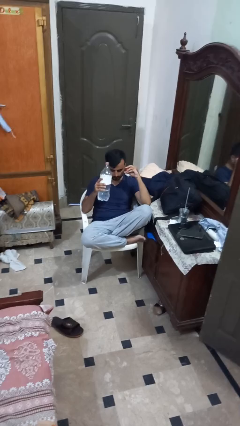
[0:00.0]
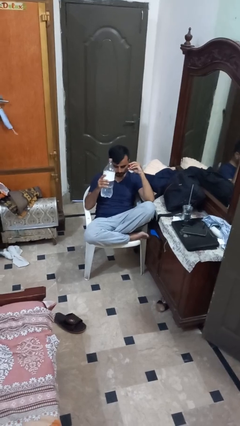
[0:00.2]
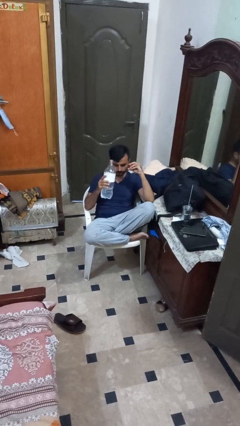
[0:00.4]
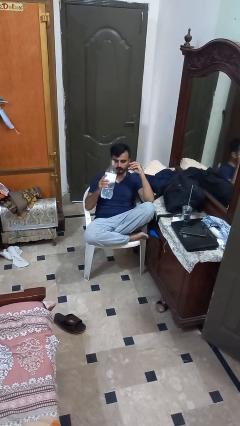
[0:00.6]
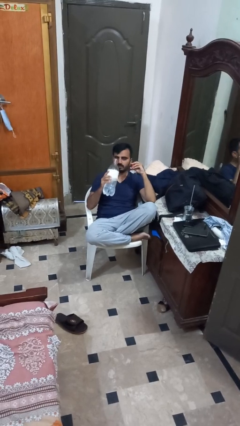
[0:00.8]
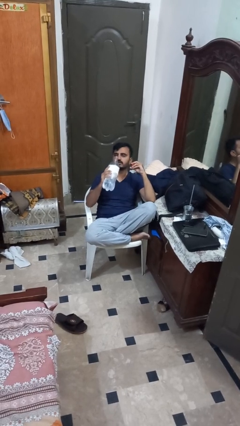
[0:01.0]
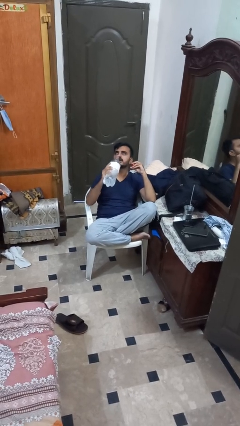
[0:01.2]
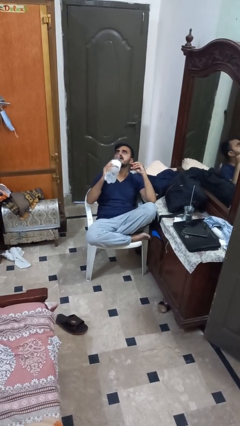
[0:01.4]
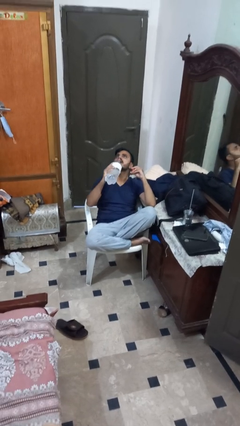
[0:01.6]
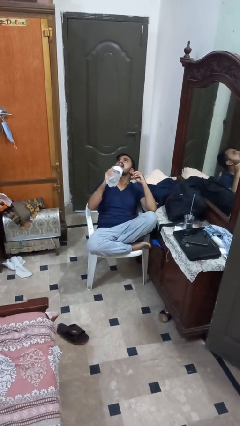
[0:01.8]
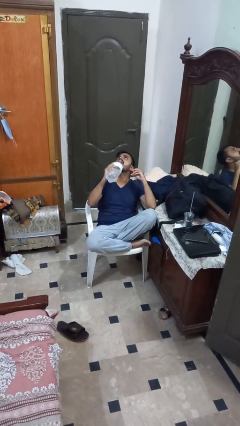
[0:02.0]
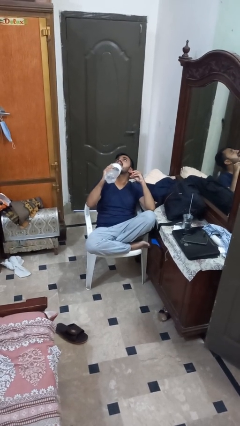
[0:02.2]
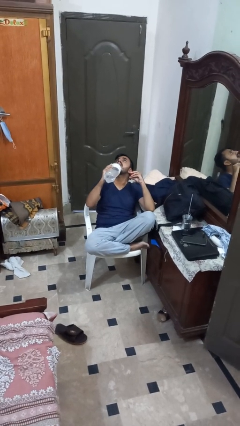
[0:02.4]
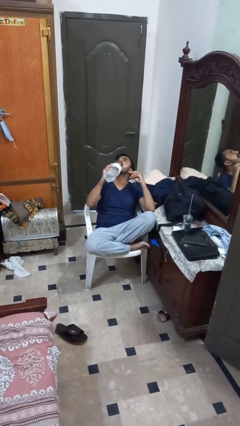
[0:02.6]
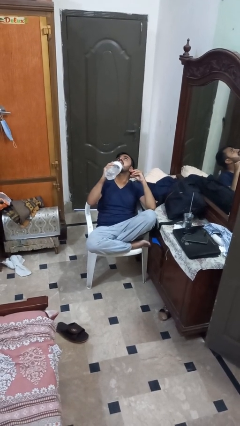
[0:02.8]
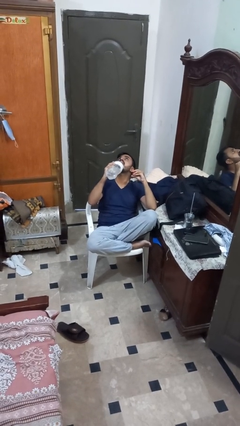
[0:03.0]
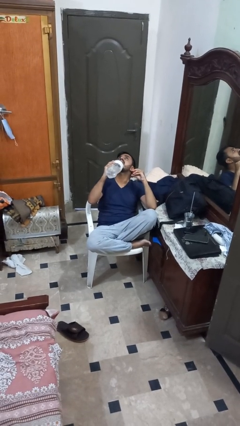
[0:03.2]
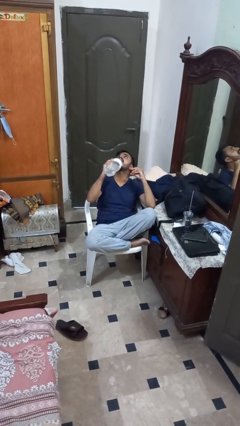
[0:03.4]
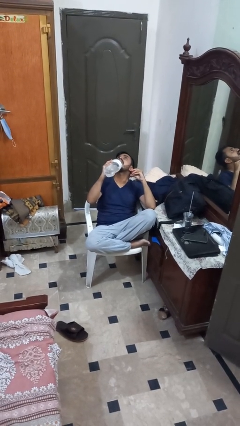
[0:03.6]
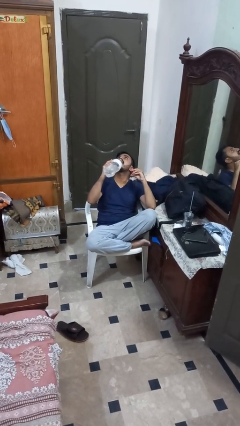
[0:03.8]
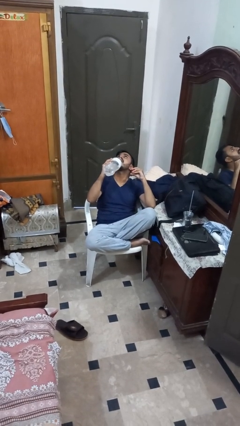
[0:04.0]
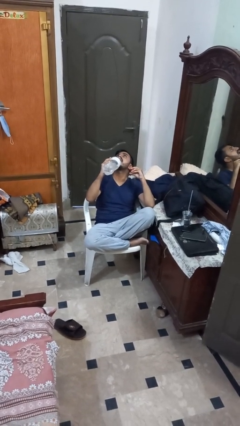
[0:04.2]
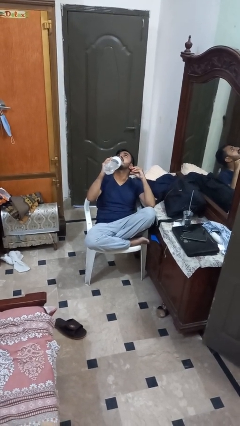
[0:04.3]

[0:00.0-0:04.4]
person drinks from bottle

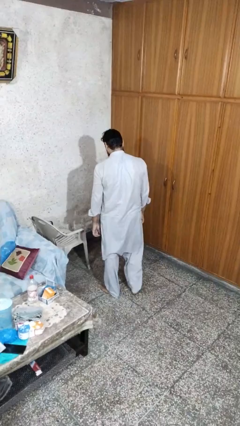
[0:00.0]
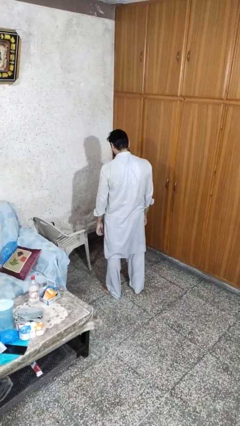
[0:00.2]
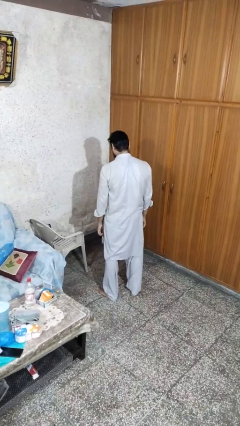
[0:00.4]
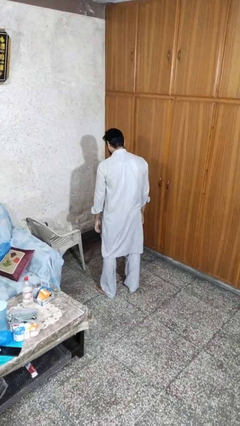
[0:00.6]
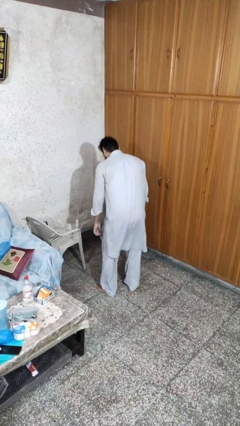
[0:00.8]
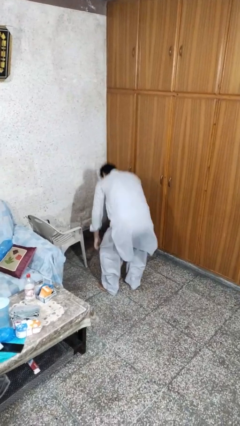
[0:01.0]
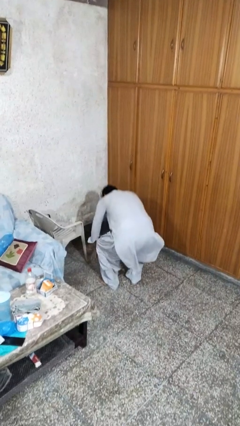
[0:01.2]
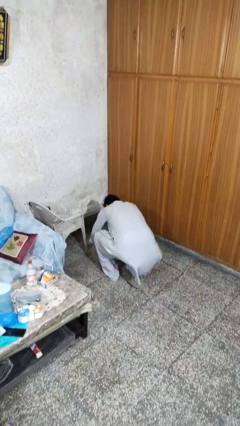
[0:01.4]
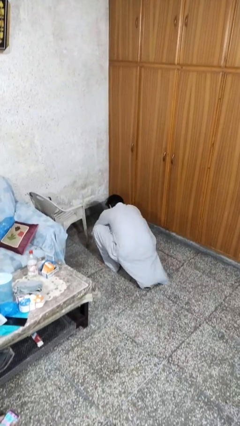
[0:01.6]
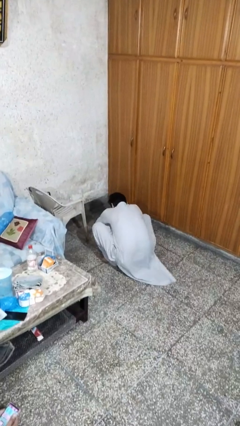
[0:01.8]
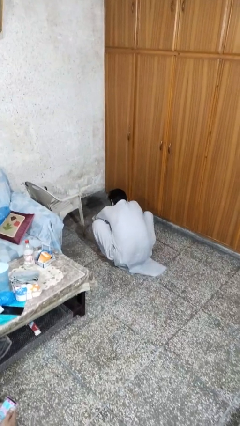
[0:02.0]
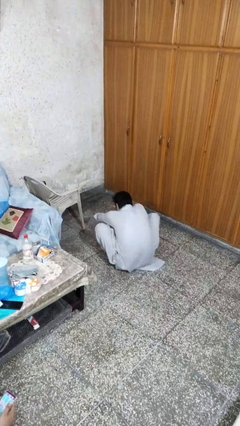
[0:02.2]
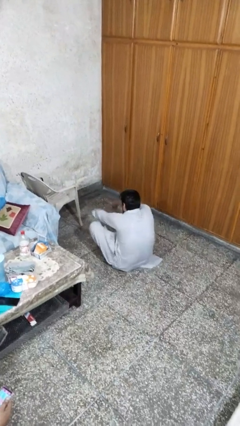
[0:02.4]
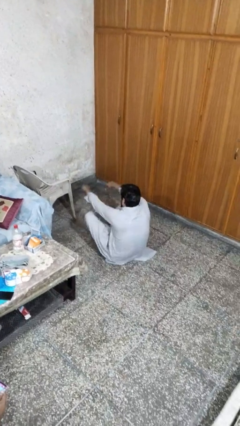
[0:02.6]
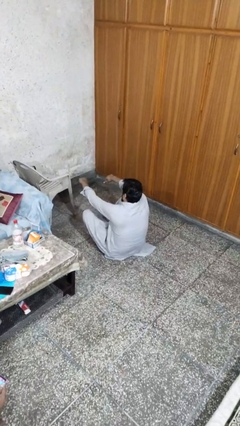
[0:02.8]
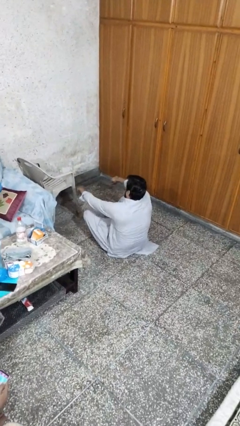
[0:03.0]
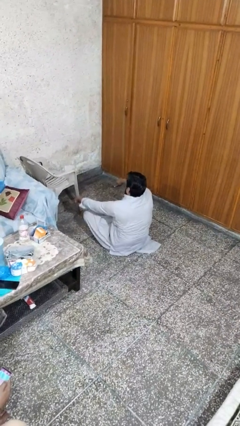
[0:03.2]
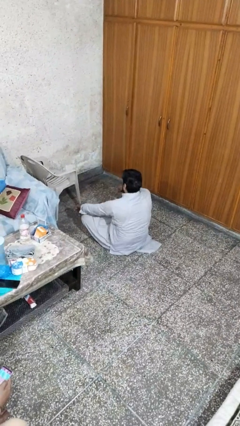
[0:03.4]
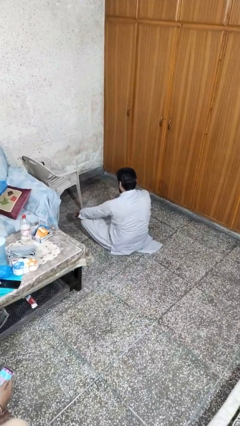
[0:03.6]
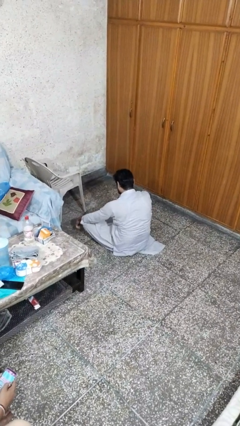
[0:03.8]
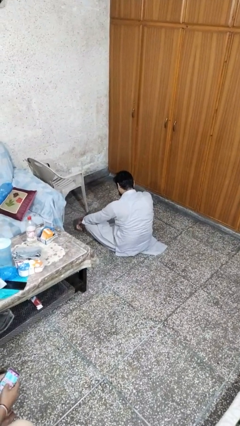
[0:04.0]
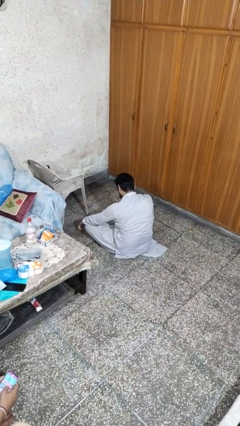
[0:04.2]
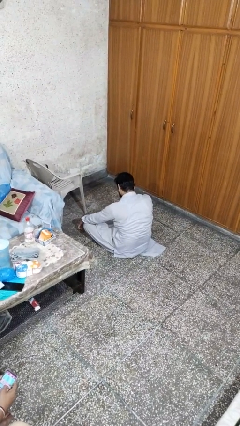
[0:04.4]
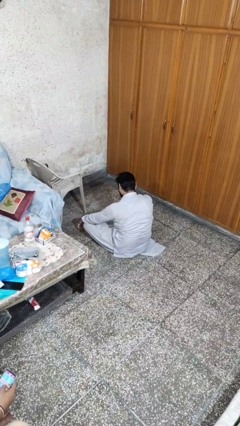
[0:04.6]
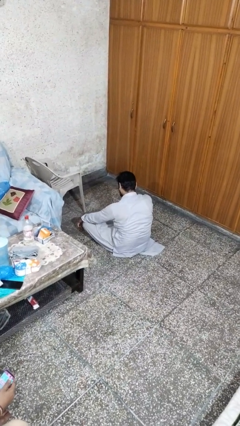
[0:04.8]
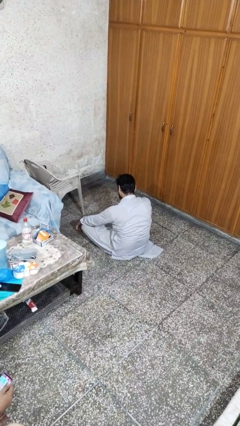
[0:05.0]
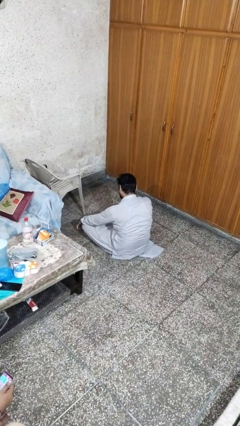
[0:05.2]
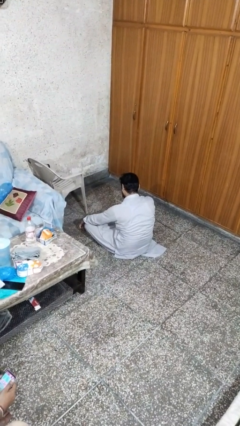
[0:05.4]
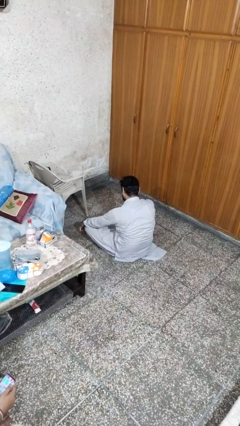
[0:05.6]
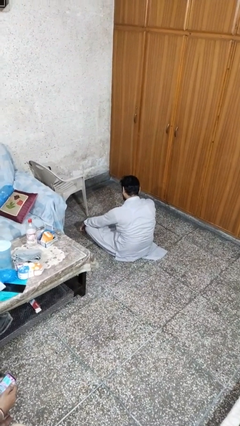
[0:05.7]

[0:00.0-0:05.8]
person sits crisscross

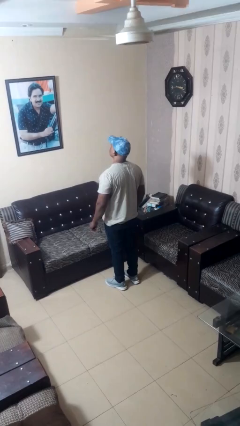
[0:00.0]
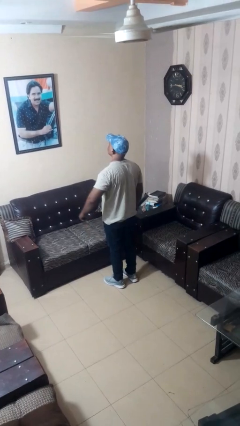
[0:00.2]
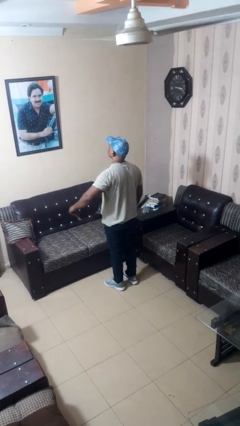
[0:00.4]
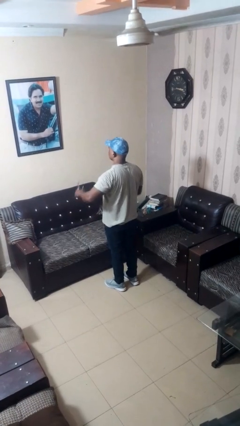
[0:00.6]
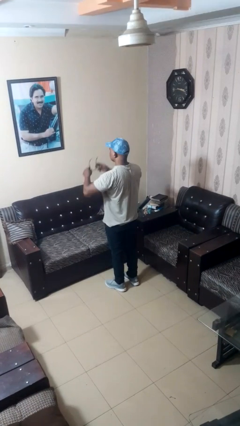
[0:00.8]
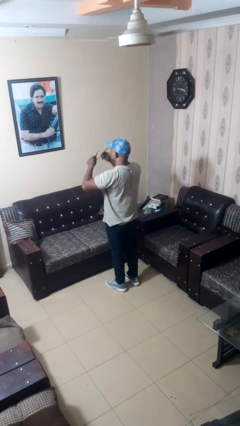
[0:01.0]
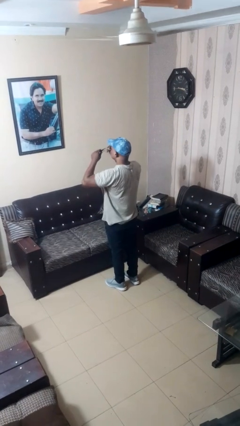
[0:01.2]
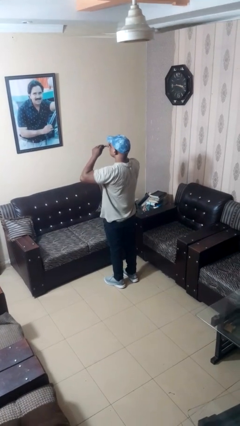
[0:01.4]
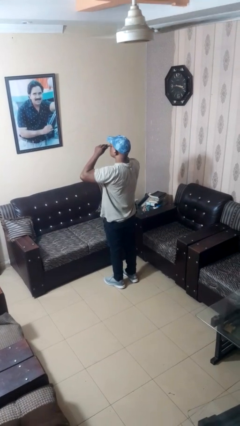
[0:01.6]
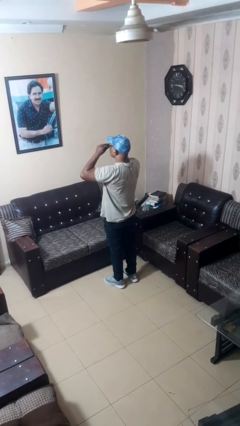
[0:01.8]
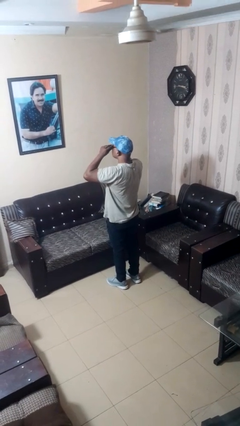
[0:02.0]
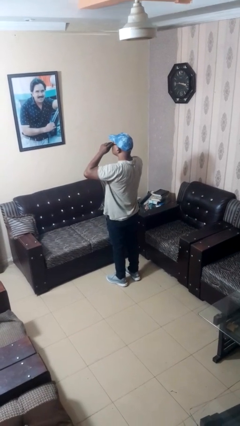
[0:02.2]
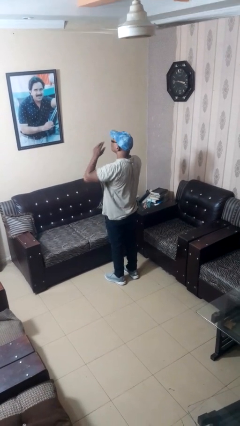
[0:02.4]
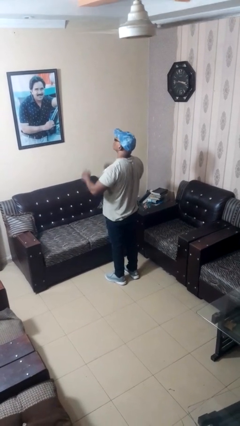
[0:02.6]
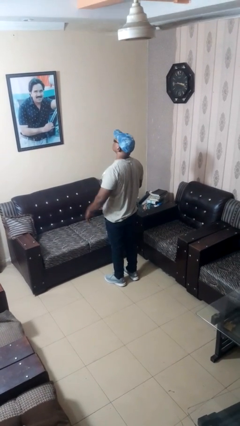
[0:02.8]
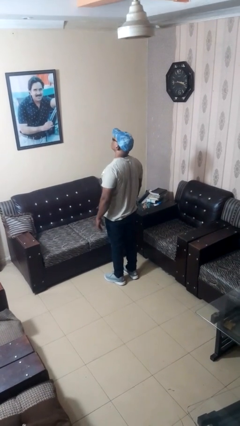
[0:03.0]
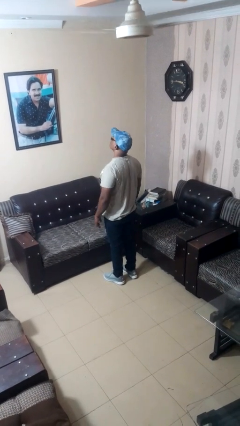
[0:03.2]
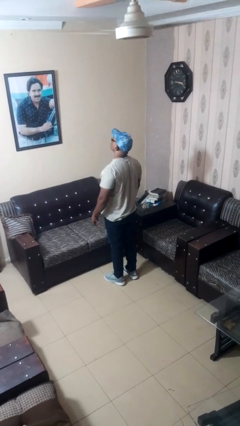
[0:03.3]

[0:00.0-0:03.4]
person puts on glasses

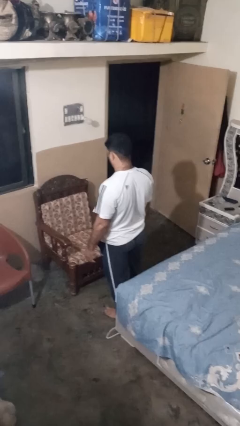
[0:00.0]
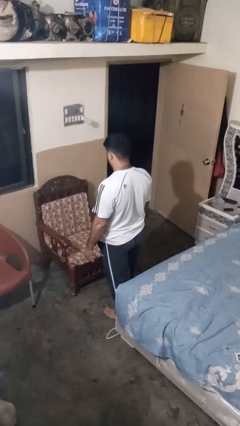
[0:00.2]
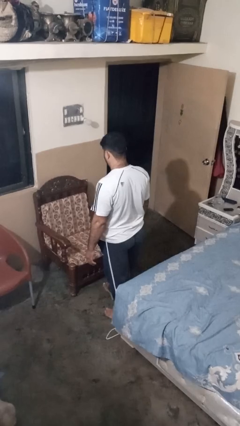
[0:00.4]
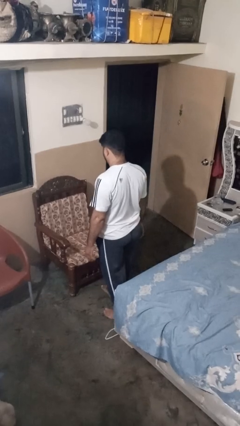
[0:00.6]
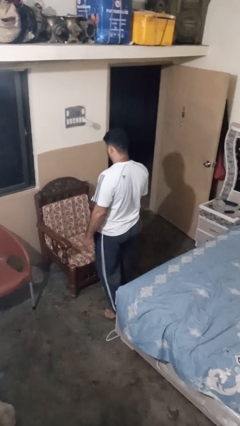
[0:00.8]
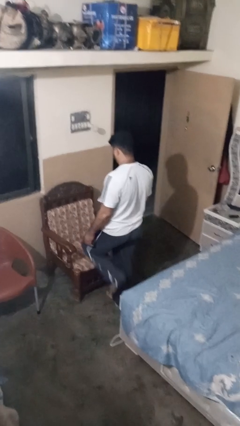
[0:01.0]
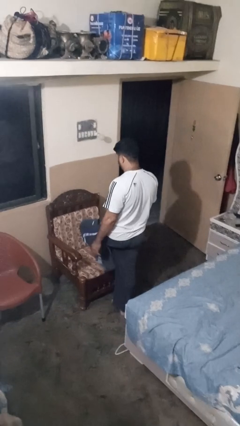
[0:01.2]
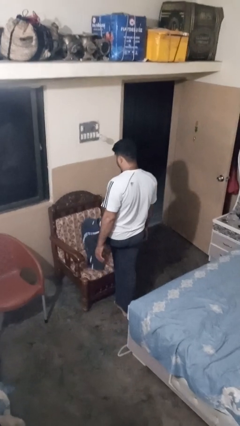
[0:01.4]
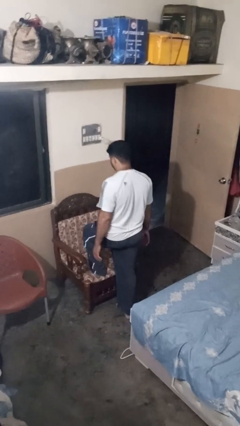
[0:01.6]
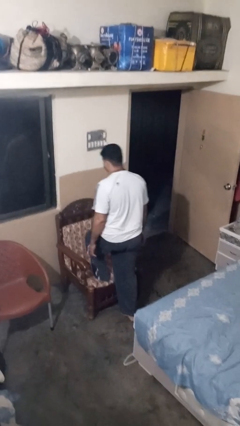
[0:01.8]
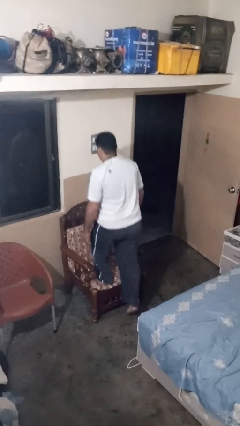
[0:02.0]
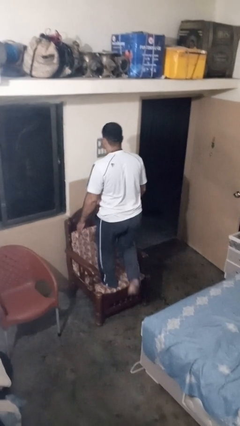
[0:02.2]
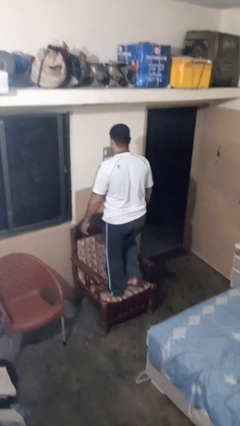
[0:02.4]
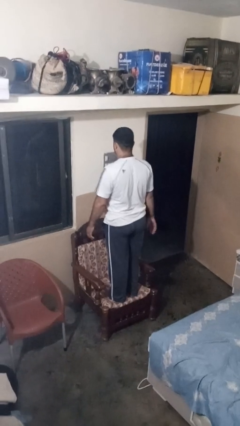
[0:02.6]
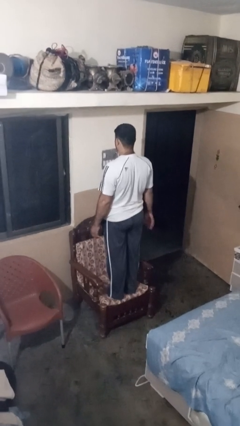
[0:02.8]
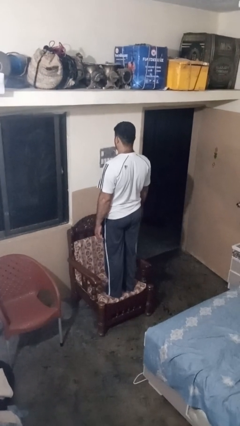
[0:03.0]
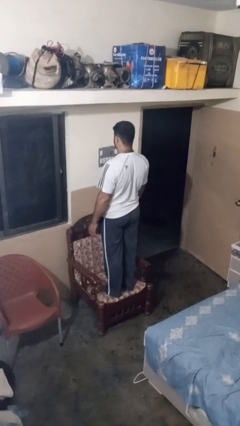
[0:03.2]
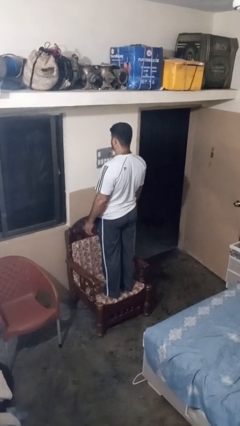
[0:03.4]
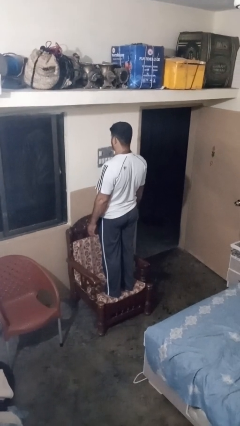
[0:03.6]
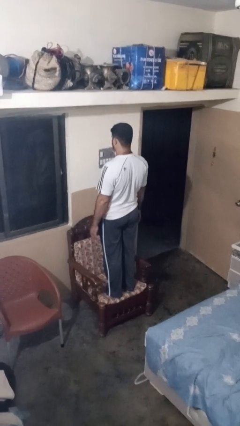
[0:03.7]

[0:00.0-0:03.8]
person climbs on couch
